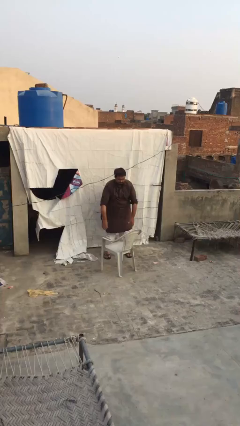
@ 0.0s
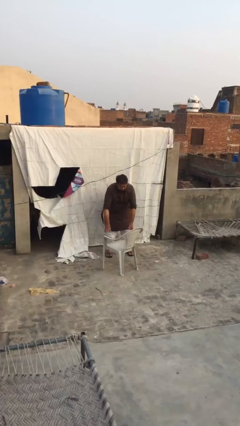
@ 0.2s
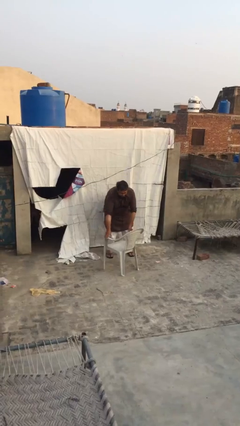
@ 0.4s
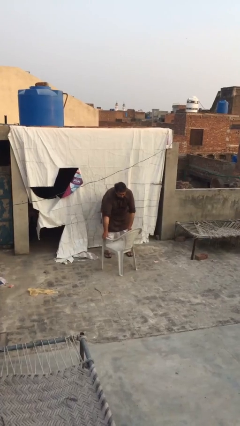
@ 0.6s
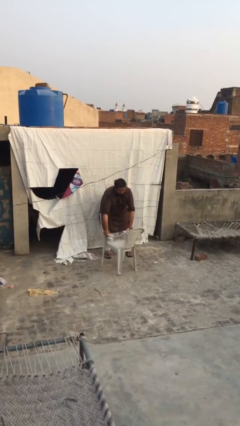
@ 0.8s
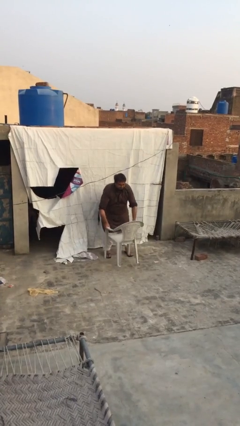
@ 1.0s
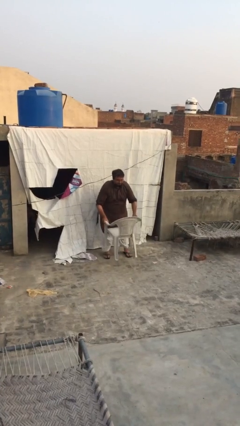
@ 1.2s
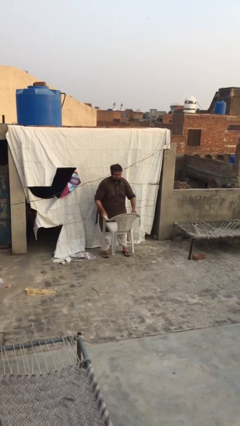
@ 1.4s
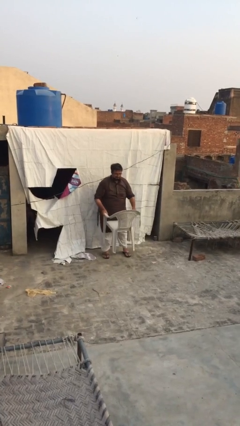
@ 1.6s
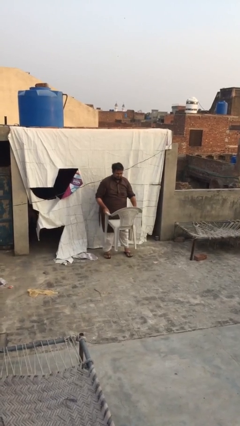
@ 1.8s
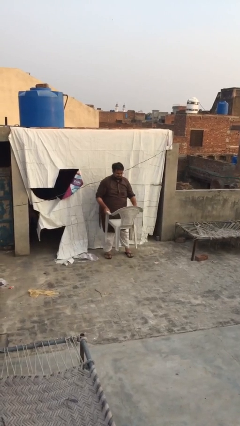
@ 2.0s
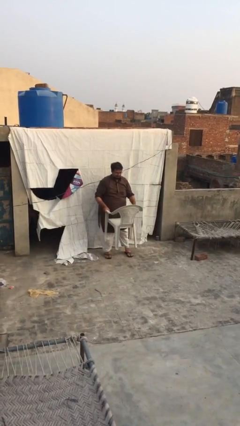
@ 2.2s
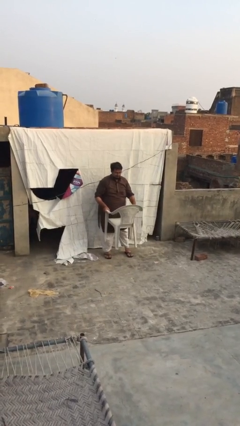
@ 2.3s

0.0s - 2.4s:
person picks up object from floor

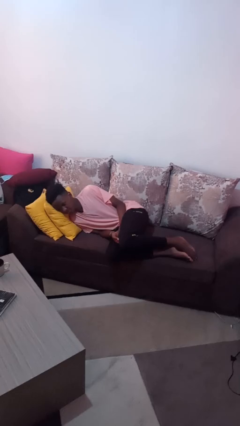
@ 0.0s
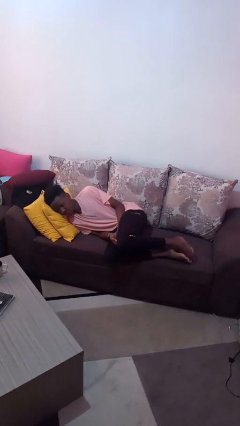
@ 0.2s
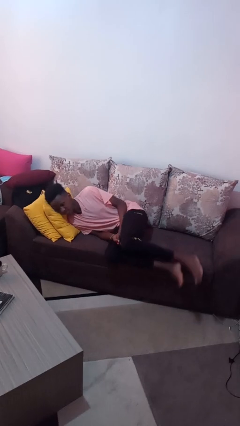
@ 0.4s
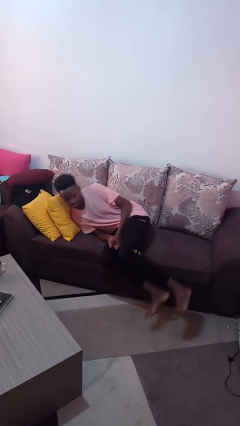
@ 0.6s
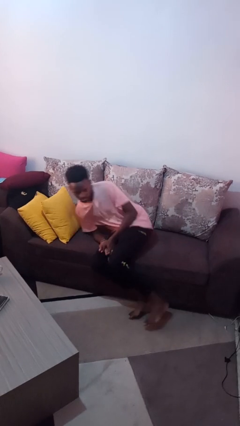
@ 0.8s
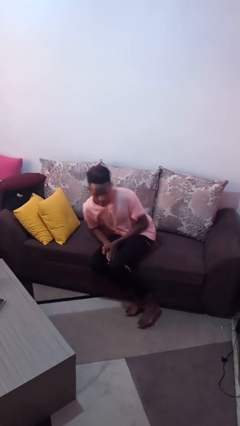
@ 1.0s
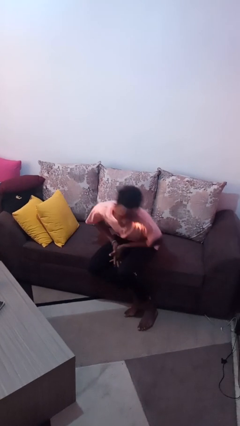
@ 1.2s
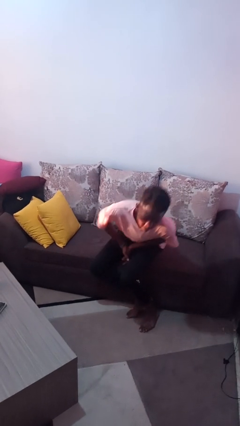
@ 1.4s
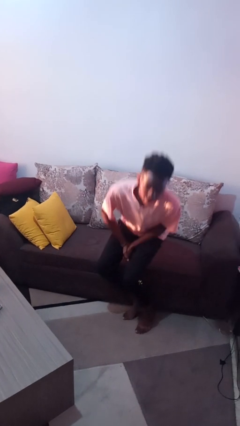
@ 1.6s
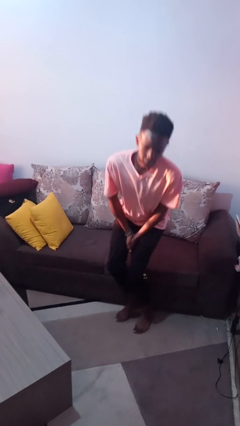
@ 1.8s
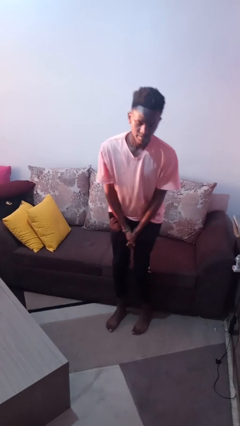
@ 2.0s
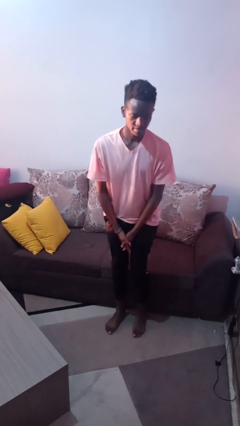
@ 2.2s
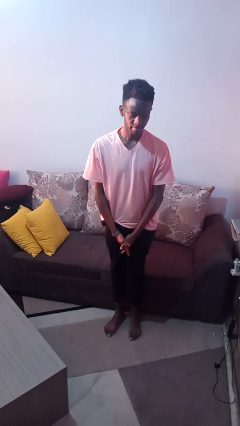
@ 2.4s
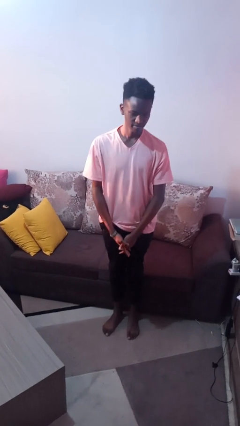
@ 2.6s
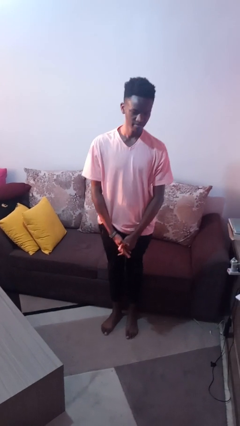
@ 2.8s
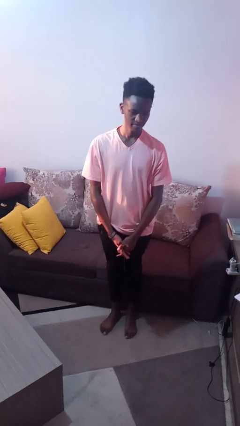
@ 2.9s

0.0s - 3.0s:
person stands up

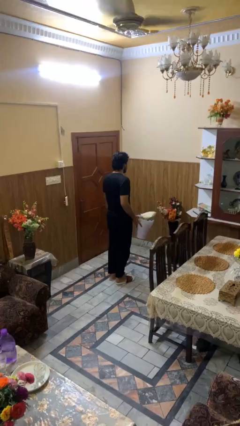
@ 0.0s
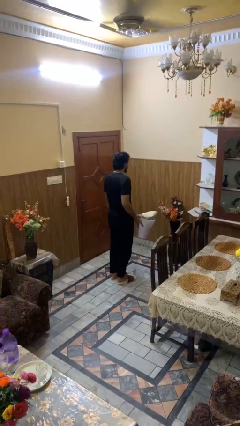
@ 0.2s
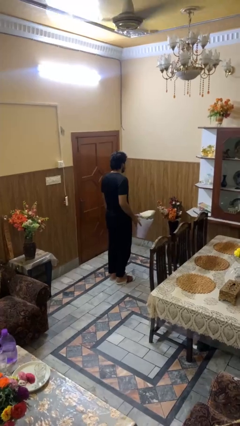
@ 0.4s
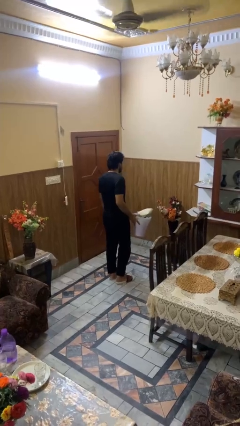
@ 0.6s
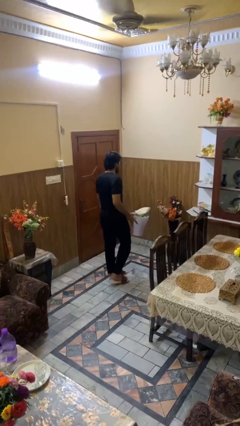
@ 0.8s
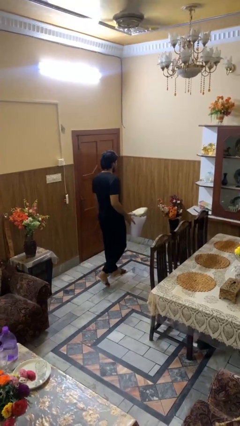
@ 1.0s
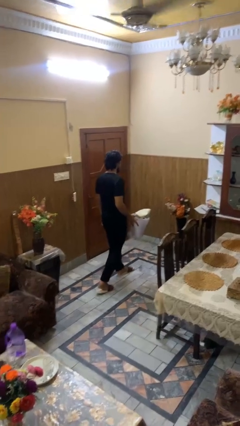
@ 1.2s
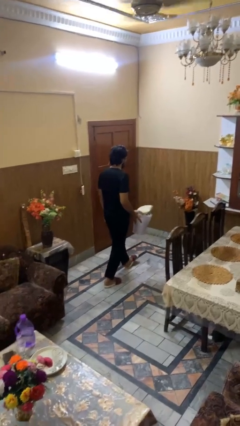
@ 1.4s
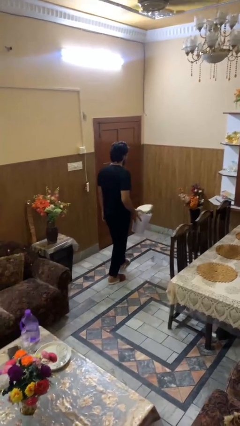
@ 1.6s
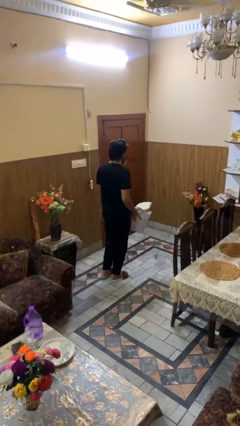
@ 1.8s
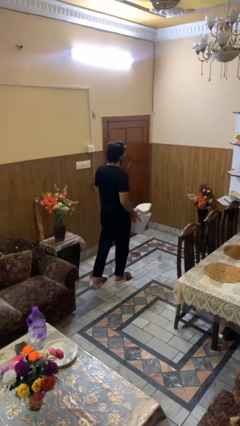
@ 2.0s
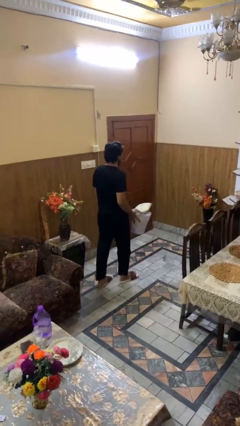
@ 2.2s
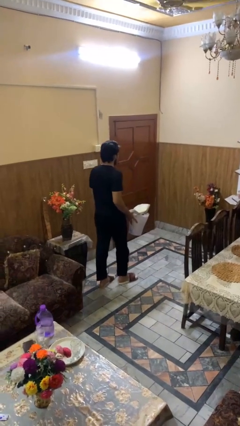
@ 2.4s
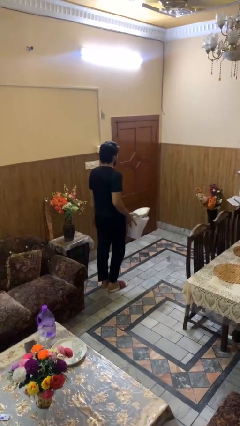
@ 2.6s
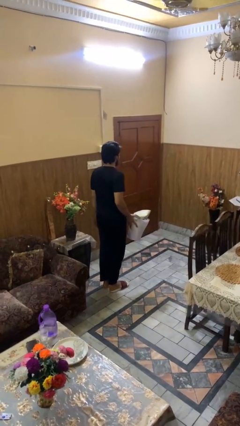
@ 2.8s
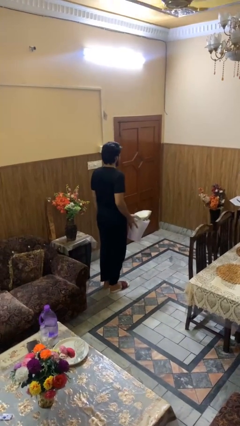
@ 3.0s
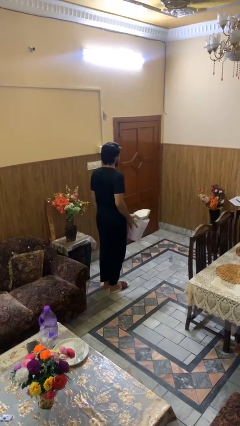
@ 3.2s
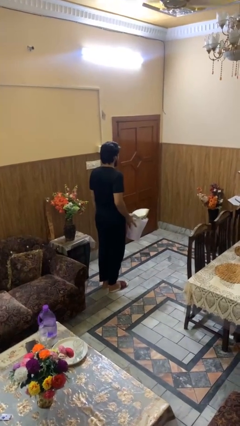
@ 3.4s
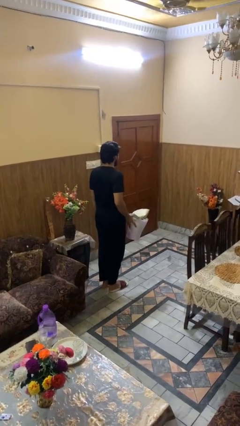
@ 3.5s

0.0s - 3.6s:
person carries laundry basket

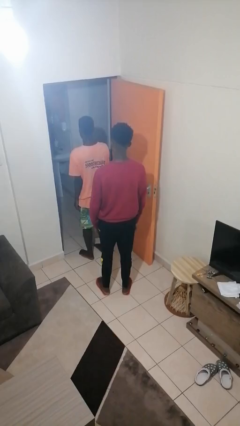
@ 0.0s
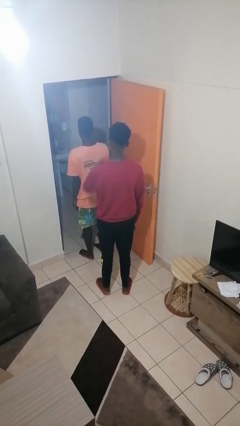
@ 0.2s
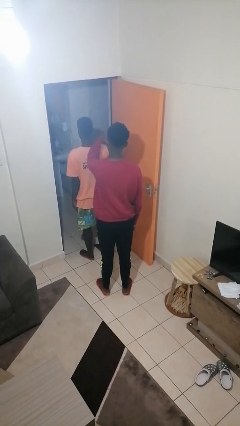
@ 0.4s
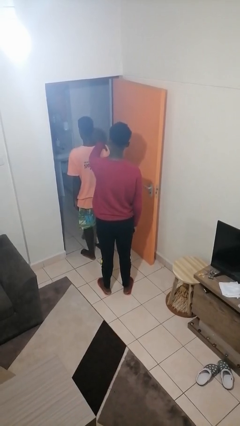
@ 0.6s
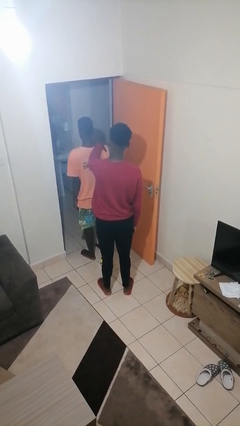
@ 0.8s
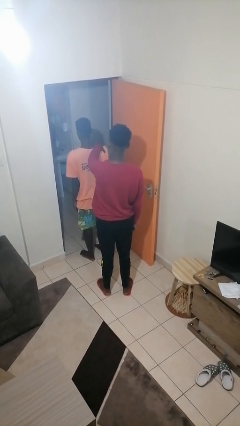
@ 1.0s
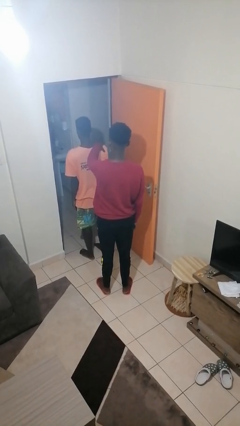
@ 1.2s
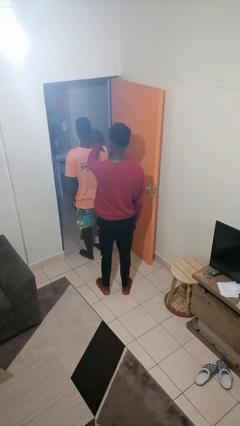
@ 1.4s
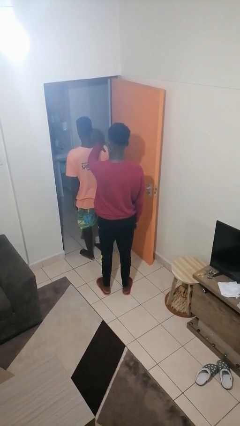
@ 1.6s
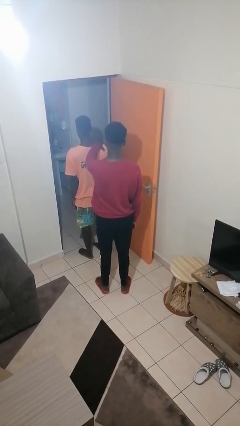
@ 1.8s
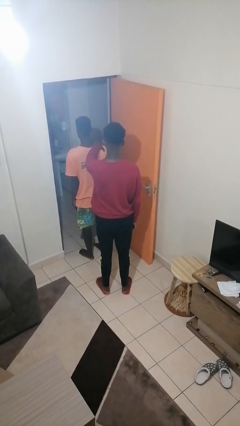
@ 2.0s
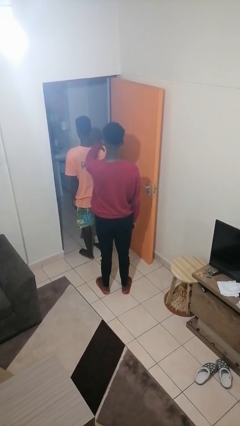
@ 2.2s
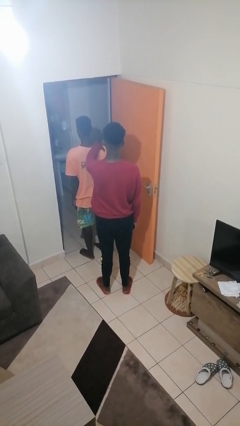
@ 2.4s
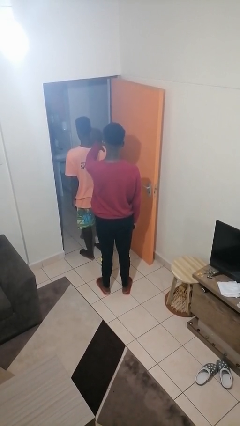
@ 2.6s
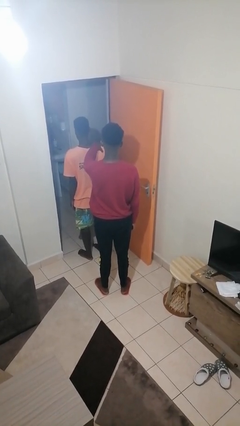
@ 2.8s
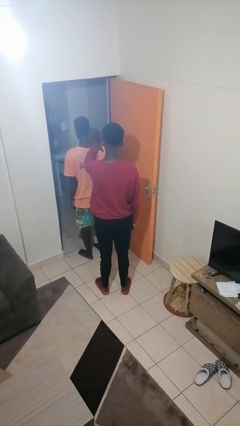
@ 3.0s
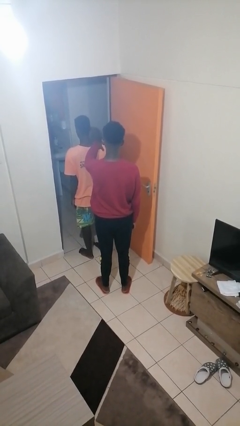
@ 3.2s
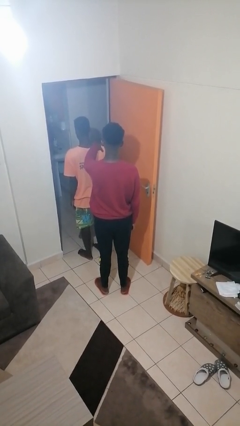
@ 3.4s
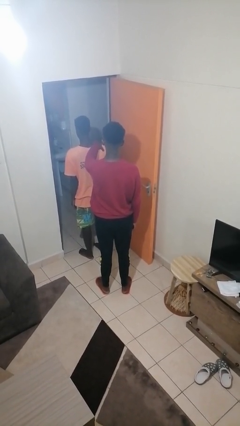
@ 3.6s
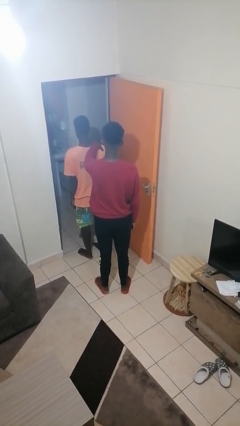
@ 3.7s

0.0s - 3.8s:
person grabs person by shoulder

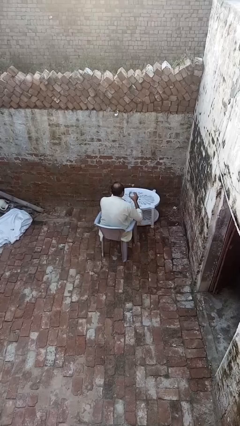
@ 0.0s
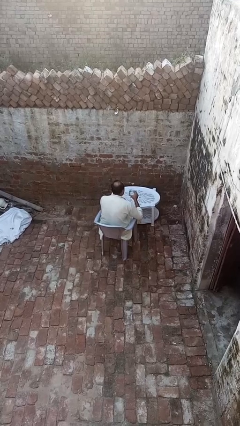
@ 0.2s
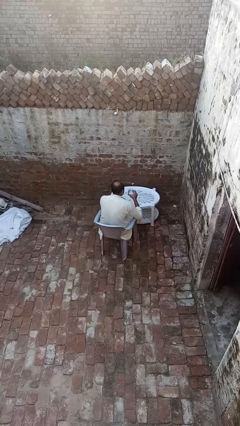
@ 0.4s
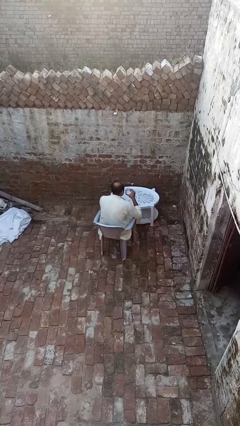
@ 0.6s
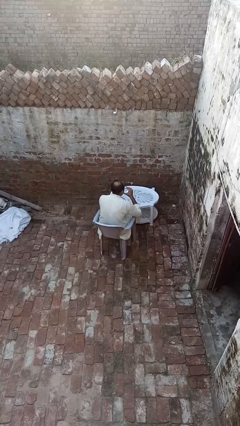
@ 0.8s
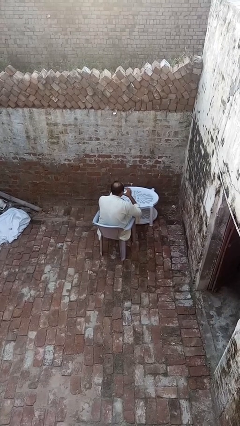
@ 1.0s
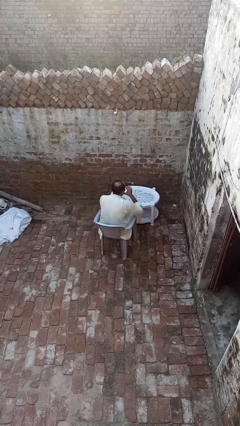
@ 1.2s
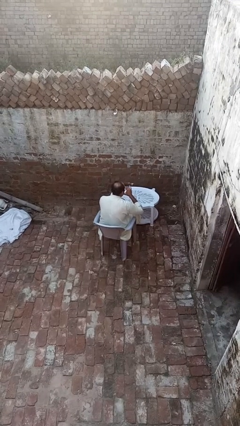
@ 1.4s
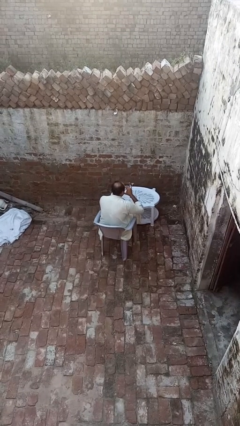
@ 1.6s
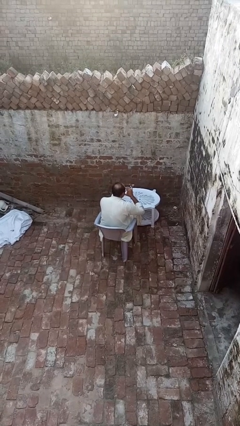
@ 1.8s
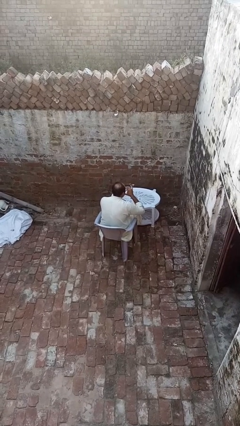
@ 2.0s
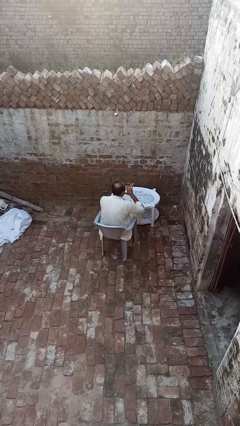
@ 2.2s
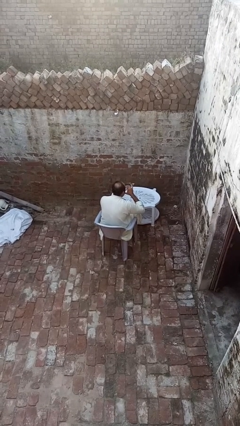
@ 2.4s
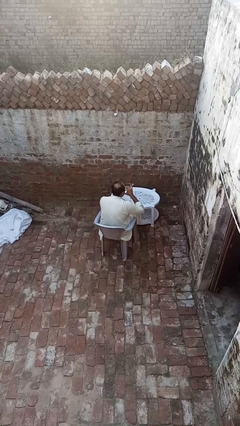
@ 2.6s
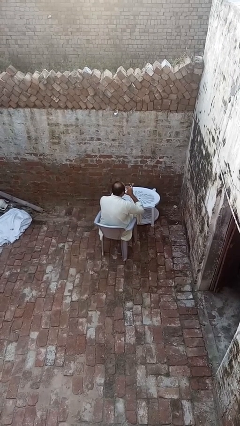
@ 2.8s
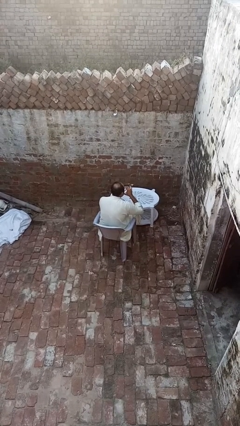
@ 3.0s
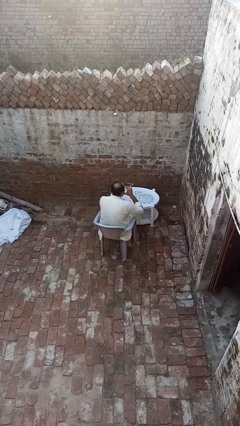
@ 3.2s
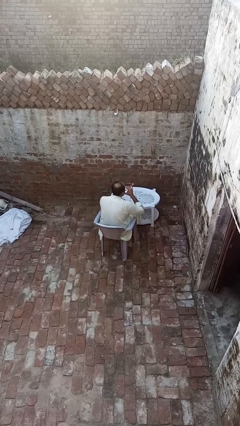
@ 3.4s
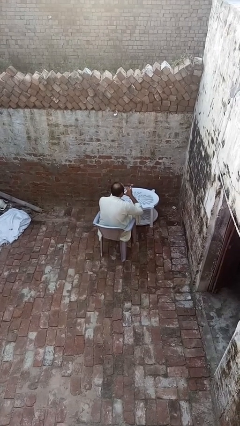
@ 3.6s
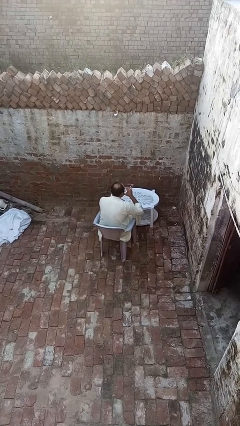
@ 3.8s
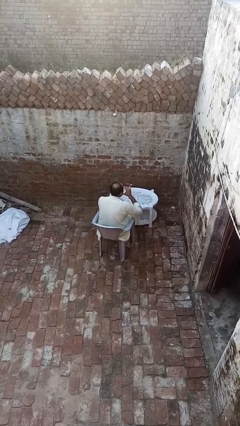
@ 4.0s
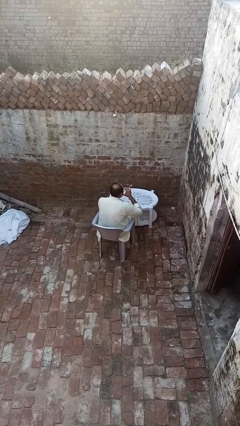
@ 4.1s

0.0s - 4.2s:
person drinks from shotglass

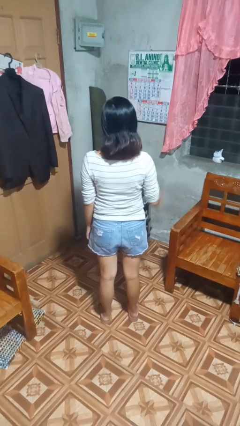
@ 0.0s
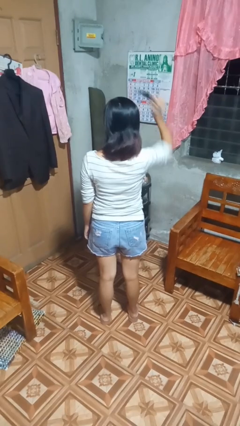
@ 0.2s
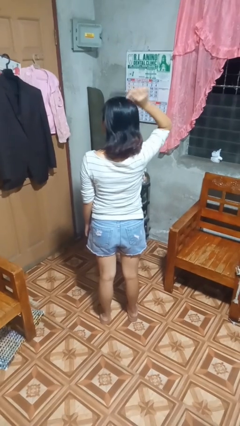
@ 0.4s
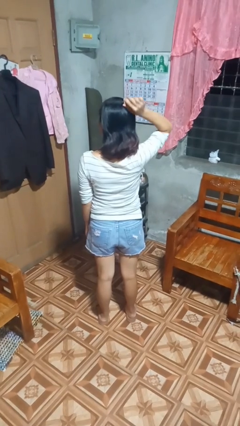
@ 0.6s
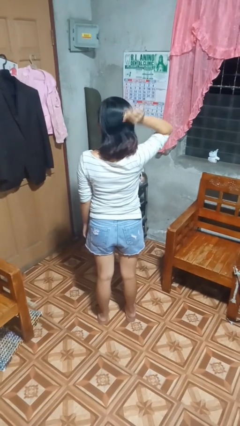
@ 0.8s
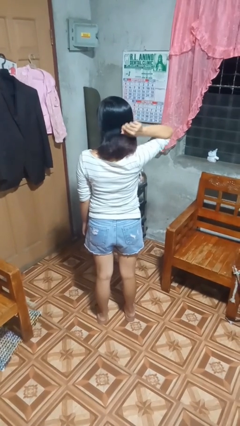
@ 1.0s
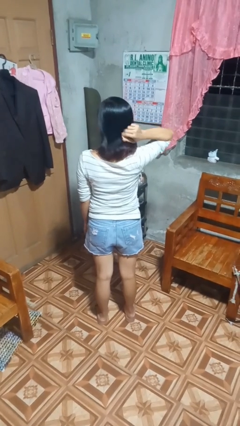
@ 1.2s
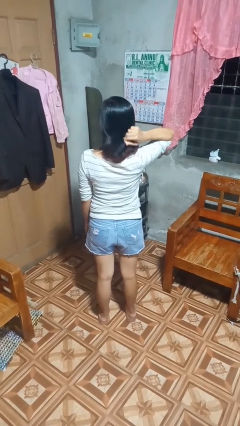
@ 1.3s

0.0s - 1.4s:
person brushes hair
